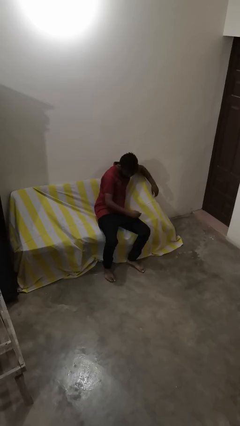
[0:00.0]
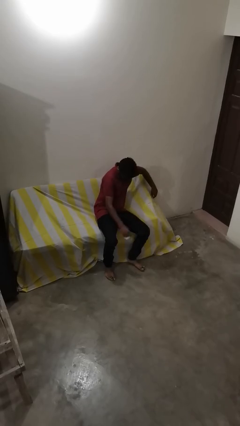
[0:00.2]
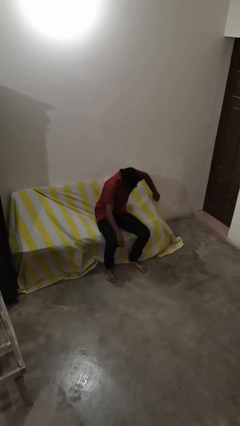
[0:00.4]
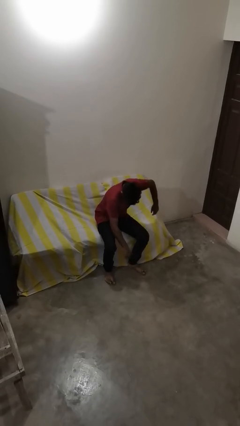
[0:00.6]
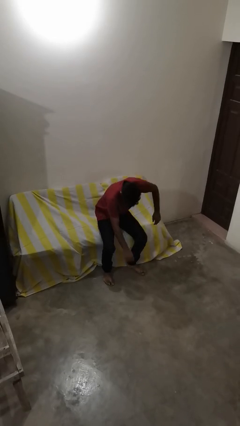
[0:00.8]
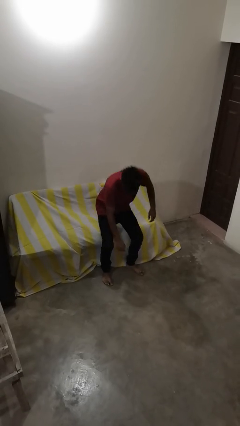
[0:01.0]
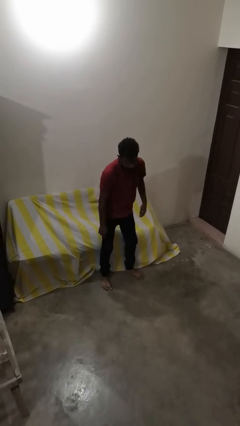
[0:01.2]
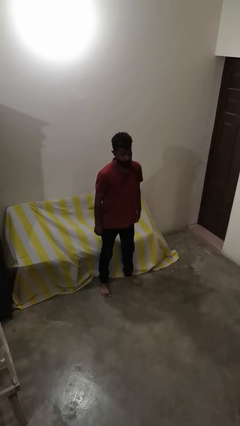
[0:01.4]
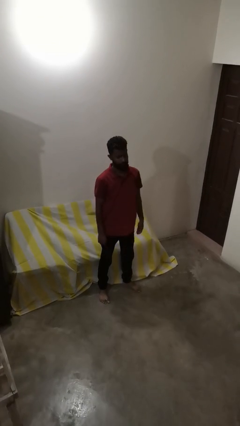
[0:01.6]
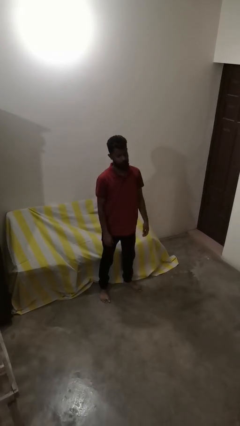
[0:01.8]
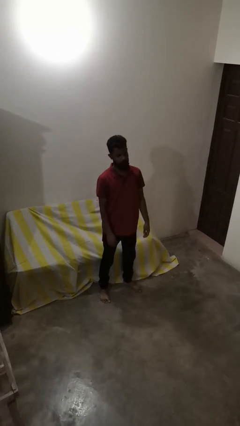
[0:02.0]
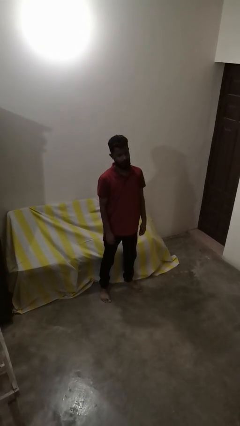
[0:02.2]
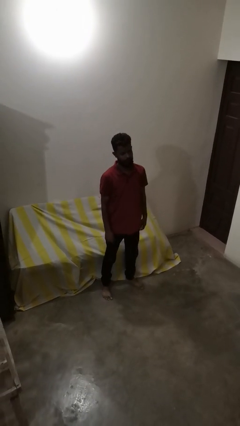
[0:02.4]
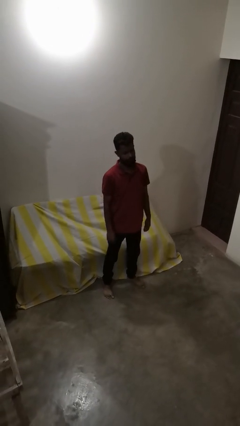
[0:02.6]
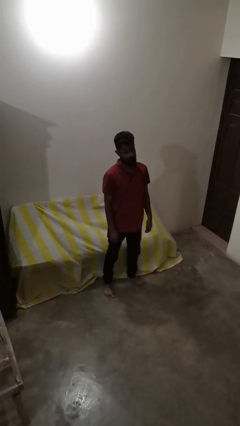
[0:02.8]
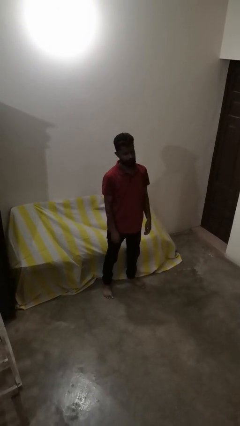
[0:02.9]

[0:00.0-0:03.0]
person stands up

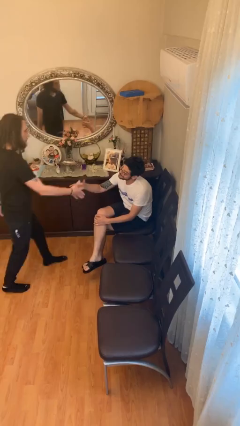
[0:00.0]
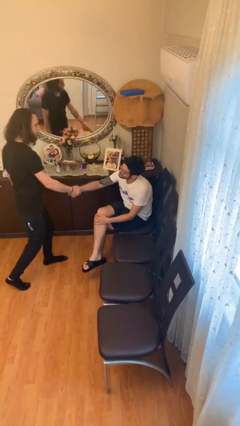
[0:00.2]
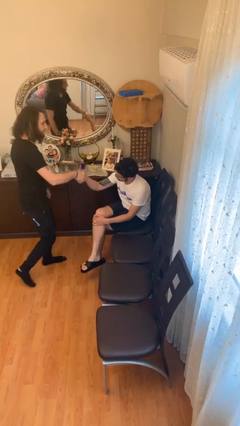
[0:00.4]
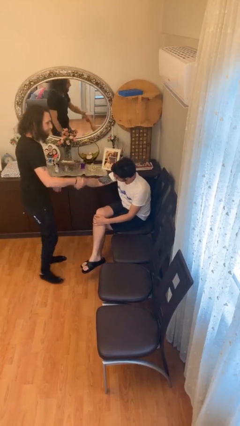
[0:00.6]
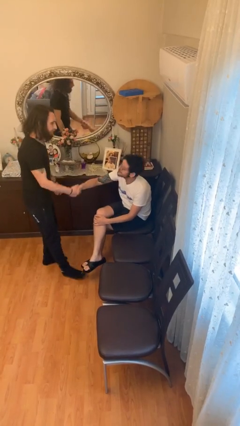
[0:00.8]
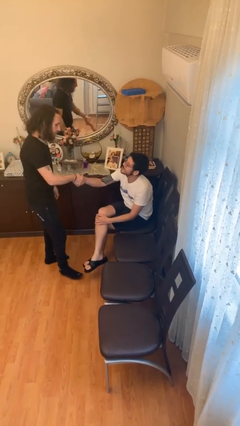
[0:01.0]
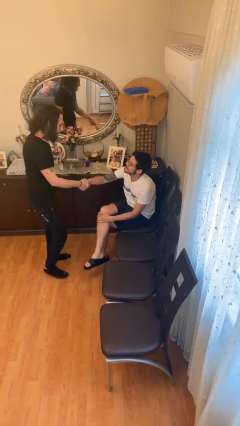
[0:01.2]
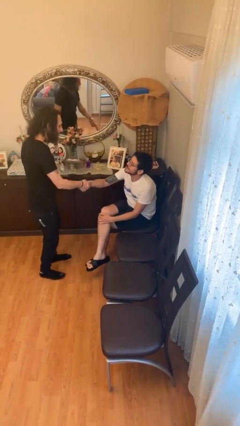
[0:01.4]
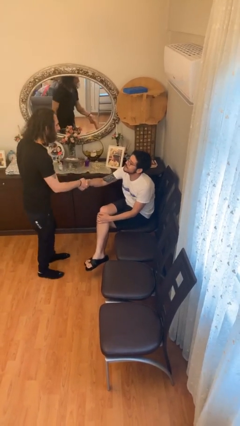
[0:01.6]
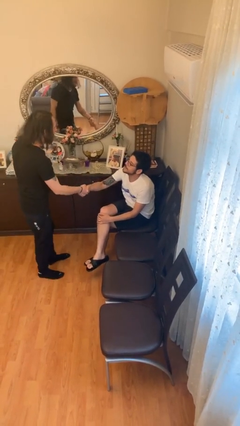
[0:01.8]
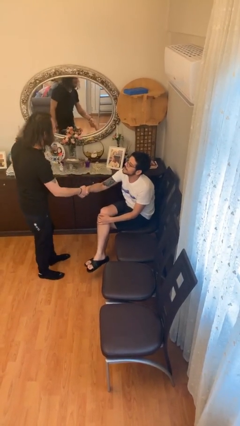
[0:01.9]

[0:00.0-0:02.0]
person shakes hand

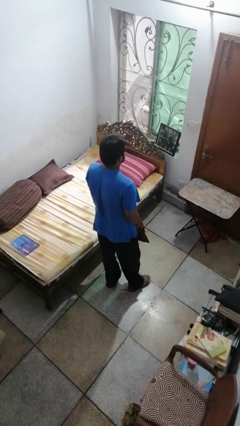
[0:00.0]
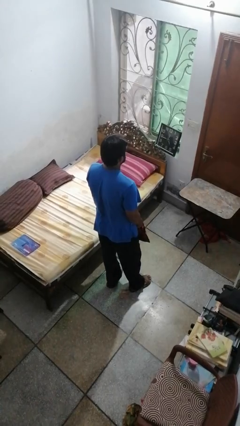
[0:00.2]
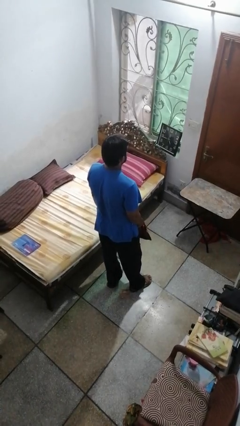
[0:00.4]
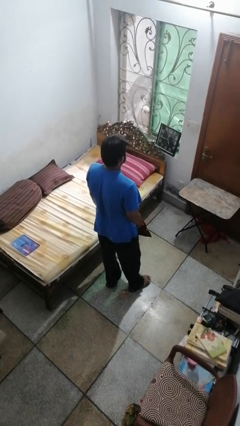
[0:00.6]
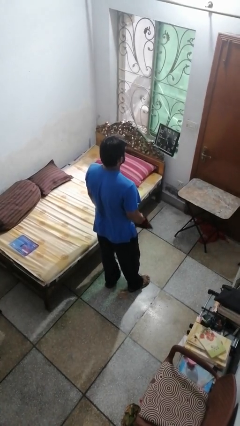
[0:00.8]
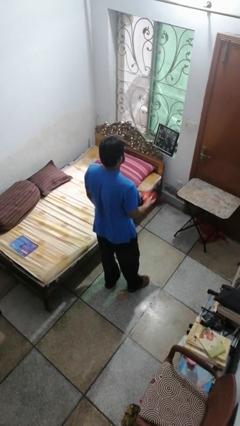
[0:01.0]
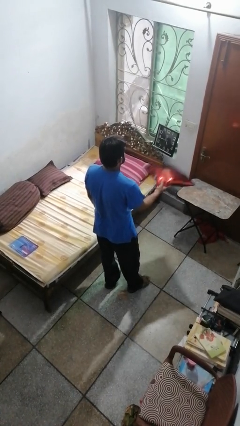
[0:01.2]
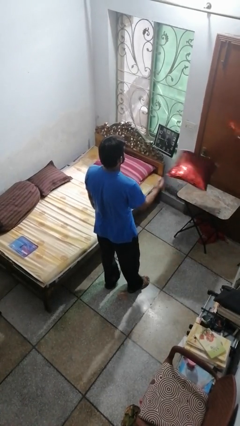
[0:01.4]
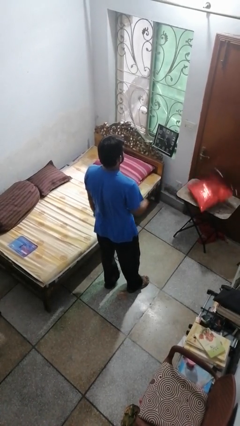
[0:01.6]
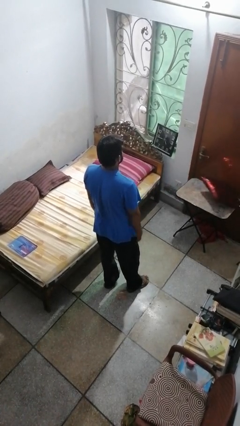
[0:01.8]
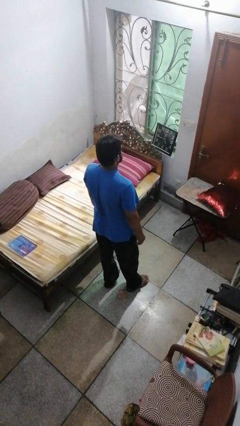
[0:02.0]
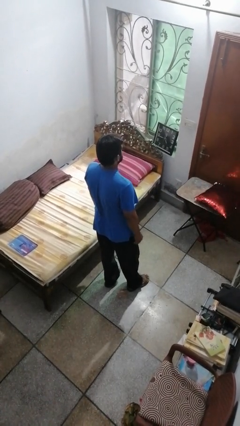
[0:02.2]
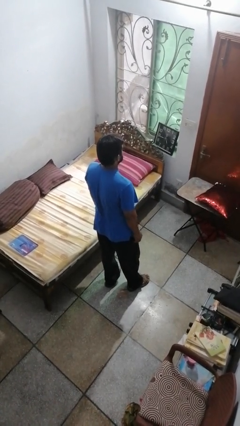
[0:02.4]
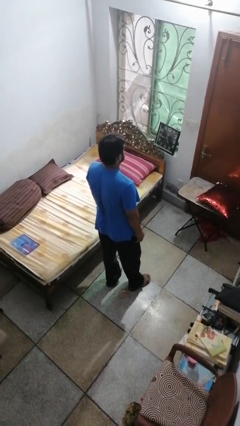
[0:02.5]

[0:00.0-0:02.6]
person throws object on table

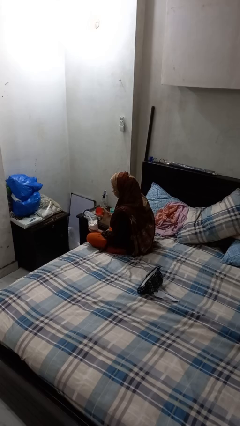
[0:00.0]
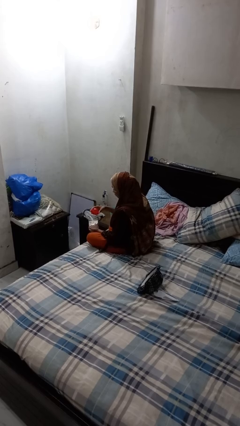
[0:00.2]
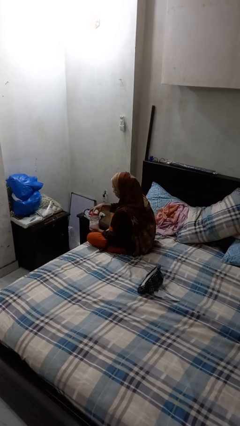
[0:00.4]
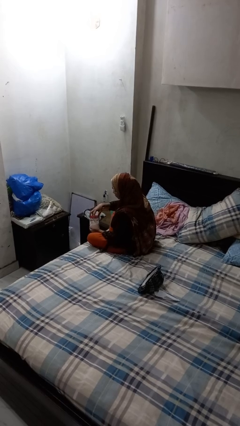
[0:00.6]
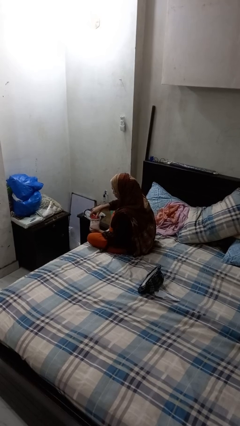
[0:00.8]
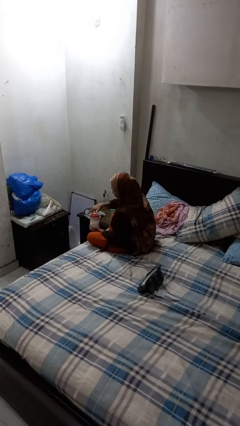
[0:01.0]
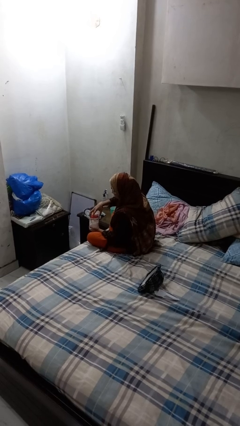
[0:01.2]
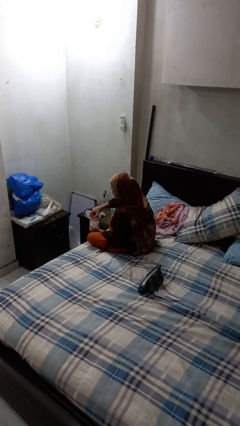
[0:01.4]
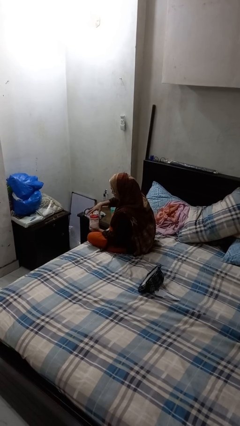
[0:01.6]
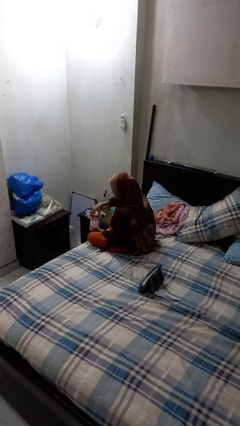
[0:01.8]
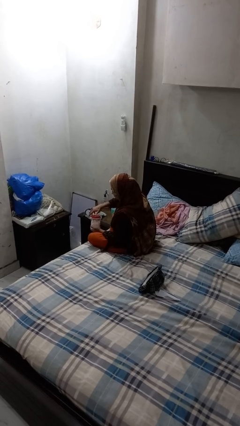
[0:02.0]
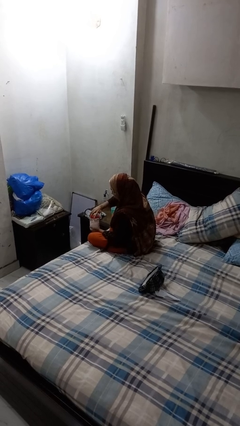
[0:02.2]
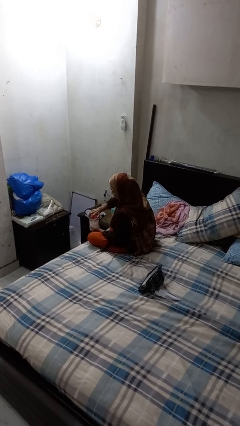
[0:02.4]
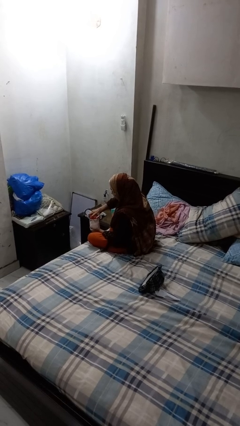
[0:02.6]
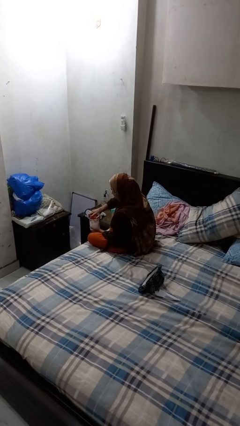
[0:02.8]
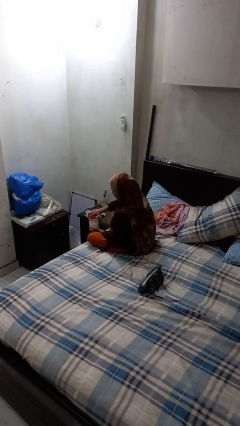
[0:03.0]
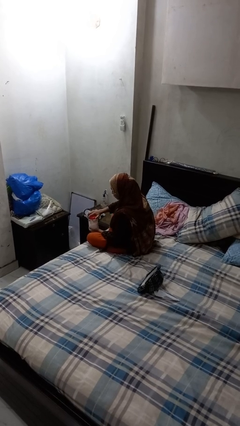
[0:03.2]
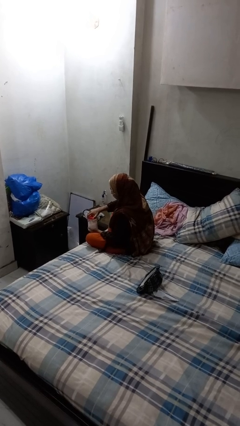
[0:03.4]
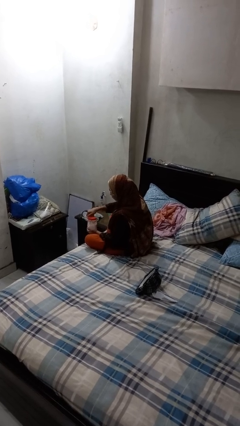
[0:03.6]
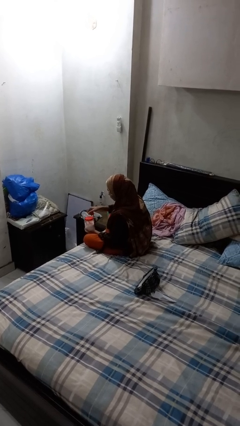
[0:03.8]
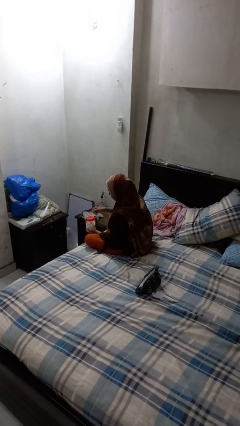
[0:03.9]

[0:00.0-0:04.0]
person closes jar

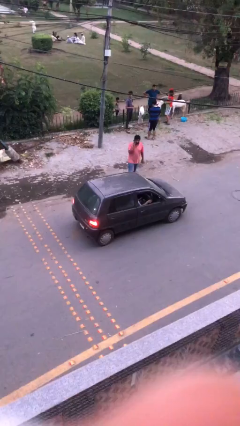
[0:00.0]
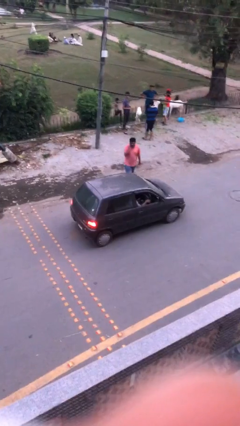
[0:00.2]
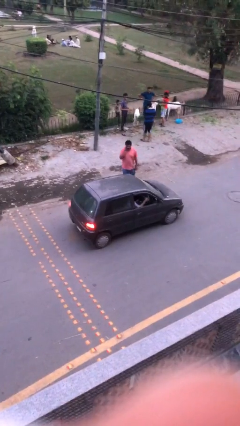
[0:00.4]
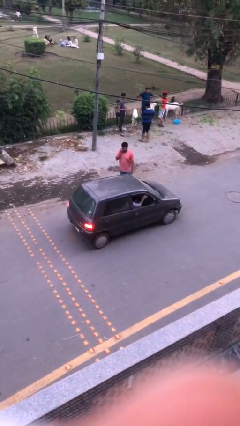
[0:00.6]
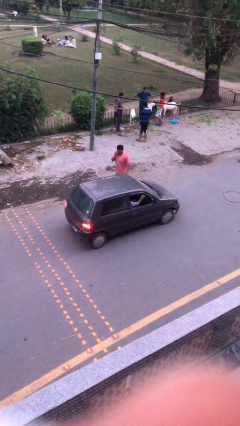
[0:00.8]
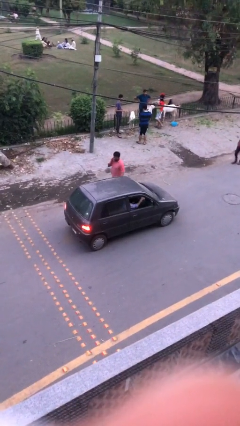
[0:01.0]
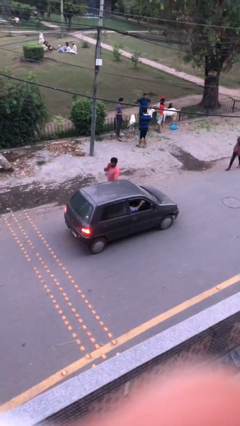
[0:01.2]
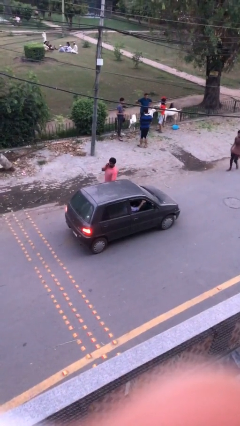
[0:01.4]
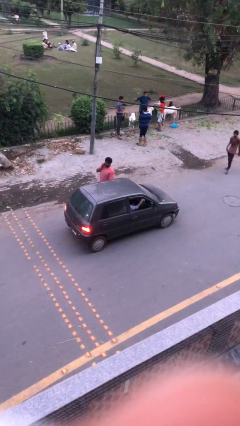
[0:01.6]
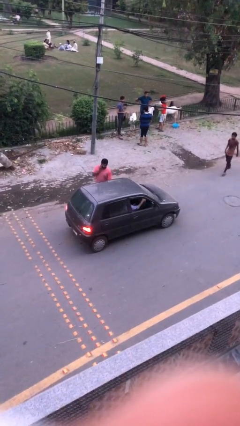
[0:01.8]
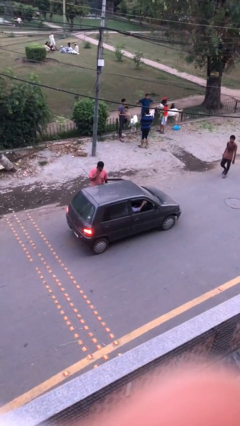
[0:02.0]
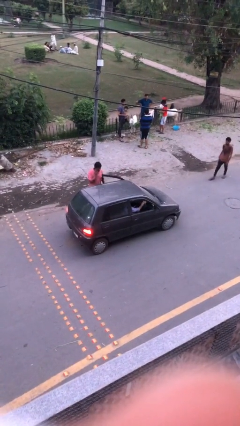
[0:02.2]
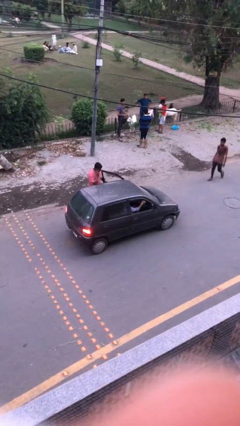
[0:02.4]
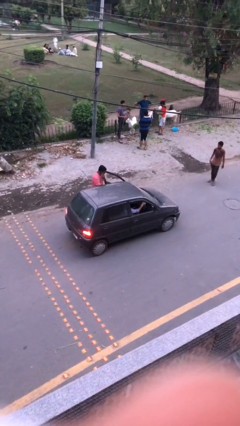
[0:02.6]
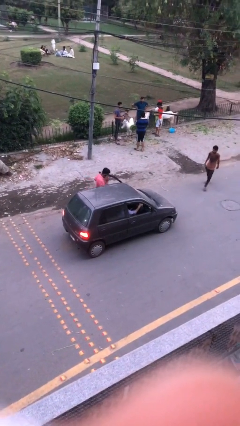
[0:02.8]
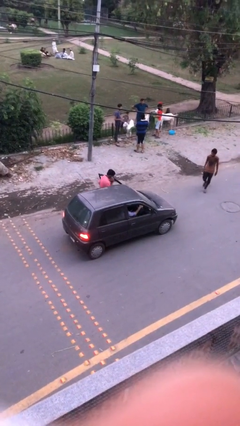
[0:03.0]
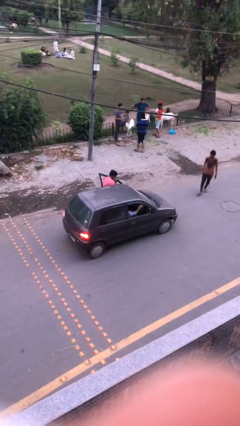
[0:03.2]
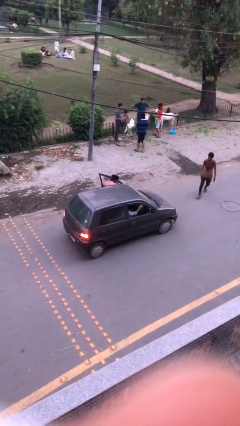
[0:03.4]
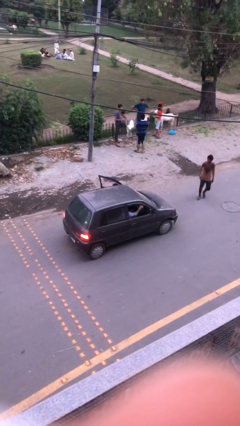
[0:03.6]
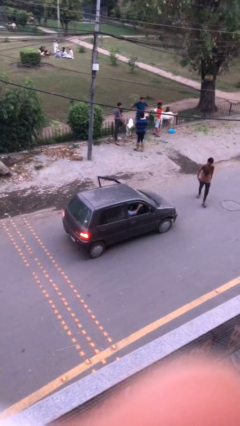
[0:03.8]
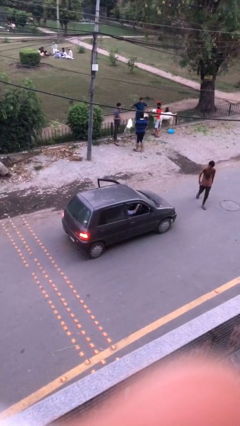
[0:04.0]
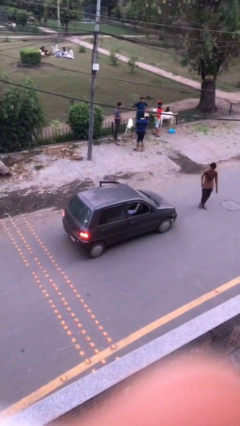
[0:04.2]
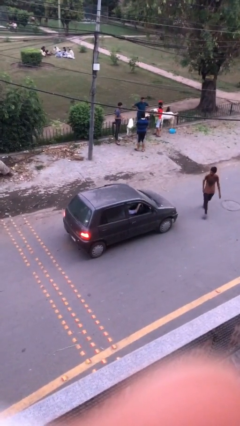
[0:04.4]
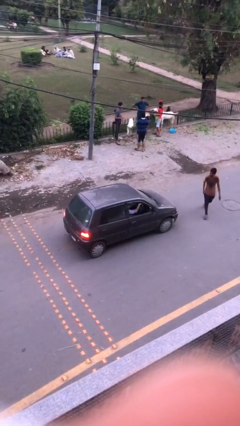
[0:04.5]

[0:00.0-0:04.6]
car picks up person

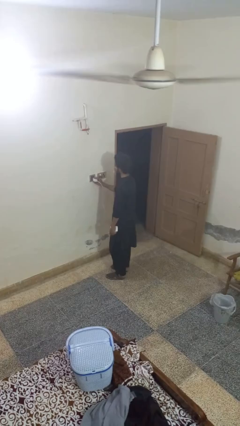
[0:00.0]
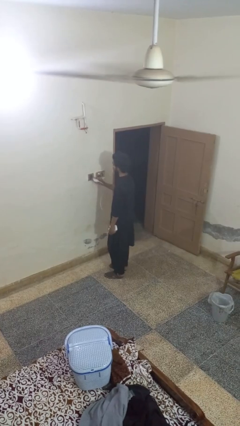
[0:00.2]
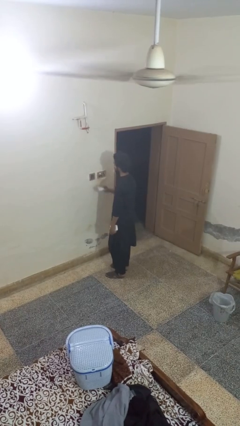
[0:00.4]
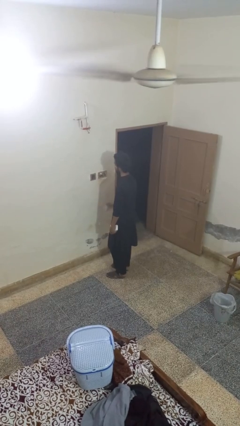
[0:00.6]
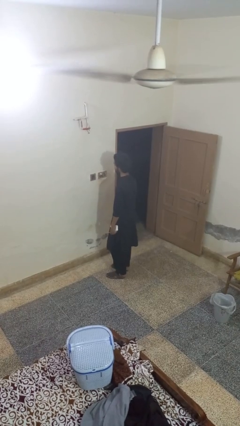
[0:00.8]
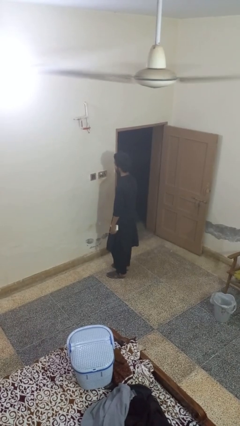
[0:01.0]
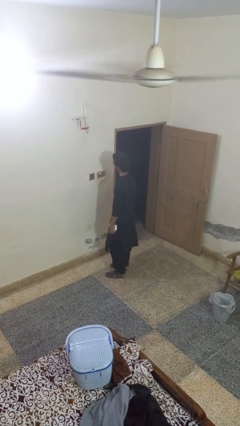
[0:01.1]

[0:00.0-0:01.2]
person unplugs from electrical socket
